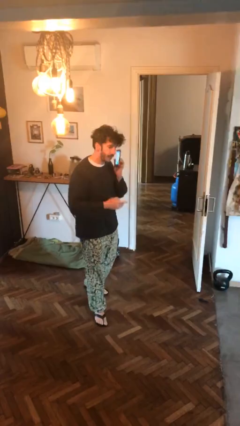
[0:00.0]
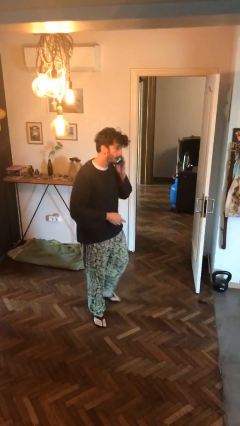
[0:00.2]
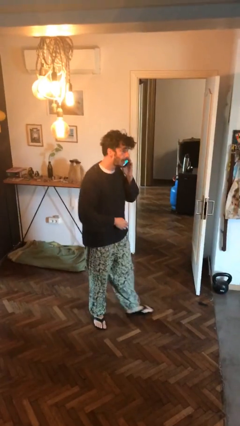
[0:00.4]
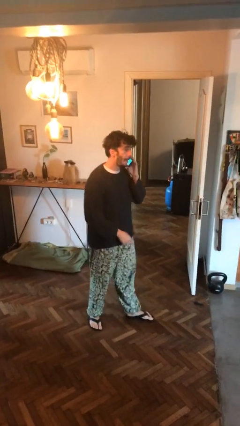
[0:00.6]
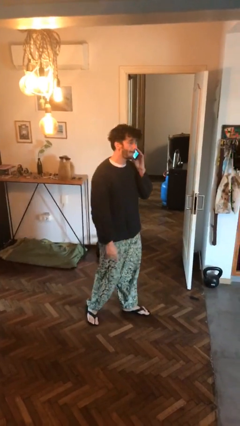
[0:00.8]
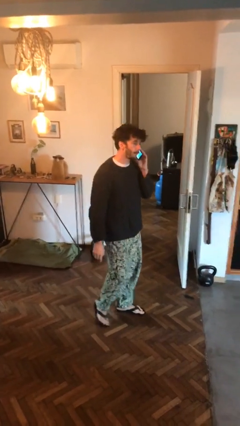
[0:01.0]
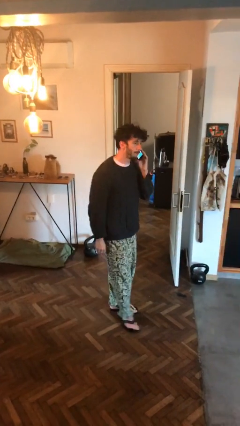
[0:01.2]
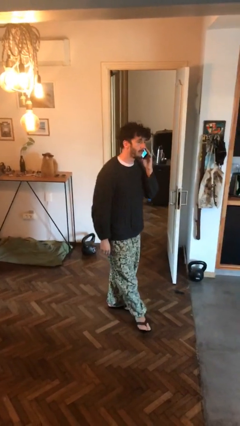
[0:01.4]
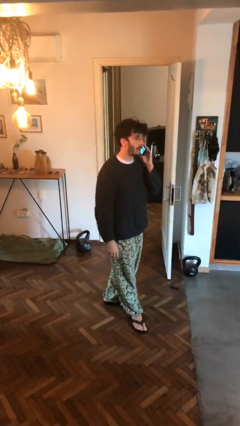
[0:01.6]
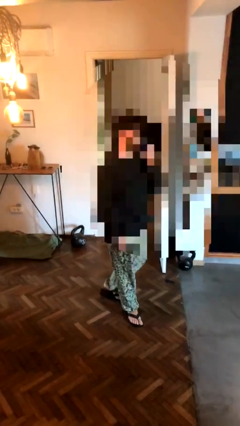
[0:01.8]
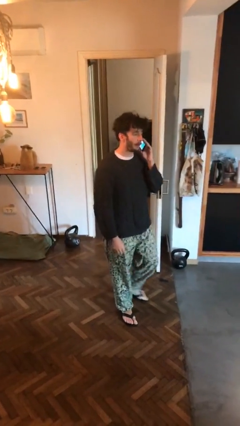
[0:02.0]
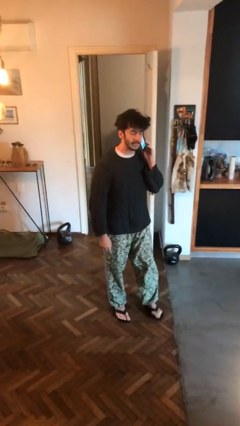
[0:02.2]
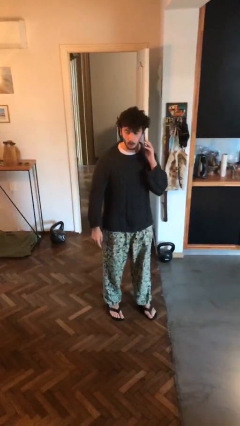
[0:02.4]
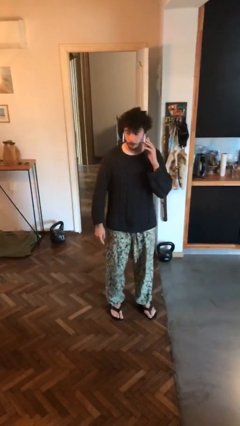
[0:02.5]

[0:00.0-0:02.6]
person talks on phone

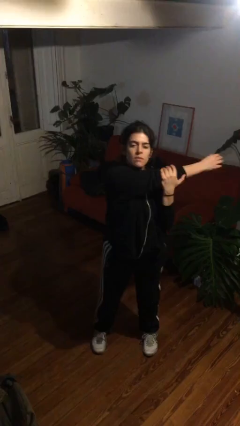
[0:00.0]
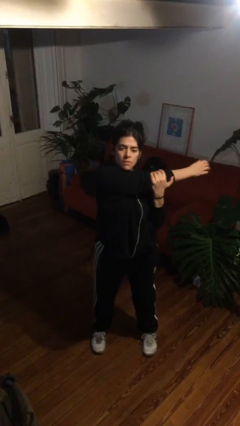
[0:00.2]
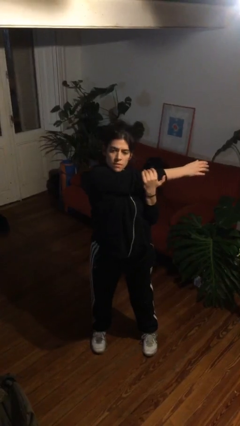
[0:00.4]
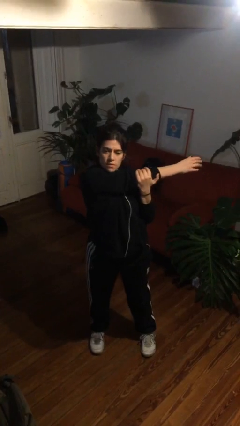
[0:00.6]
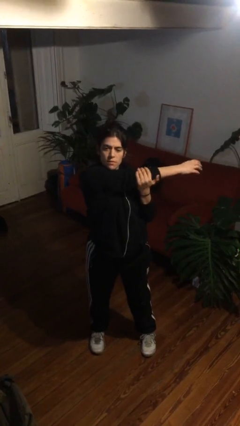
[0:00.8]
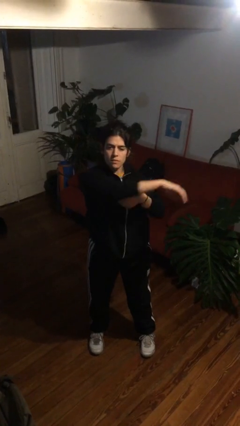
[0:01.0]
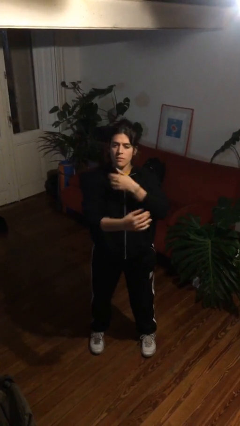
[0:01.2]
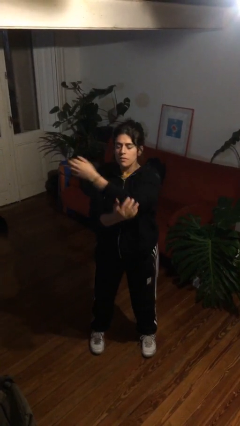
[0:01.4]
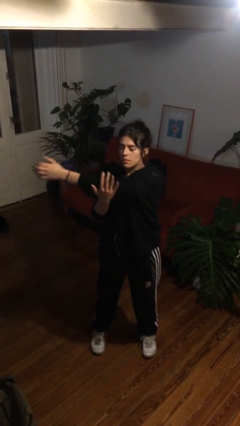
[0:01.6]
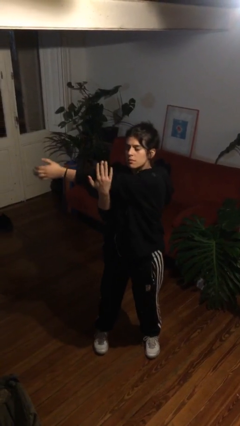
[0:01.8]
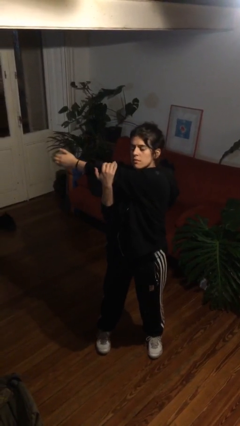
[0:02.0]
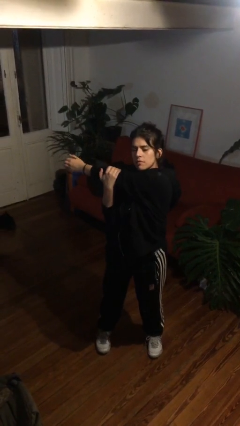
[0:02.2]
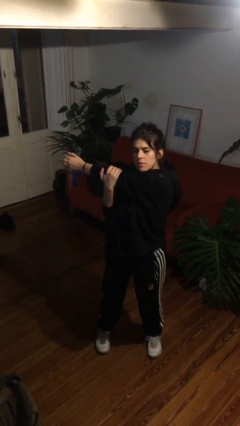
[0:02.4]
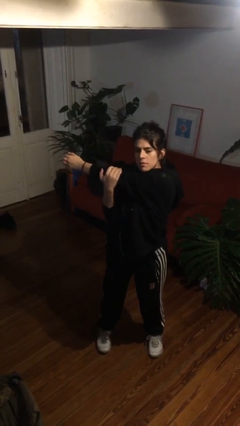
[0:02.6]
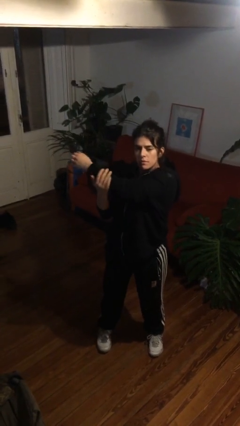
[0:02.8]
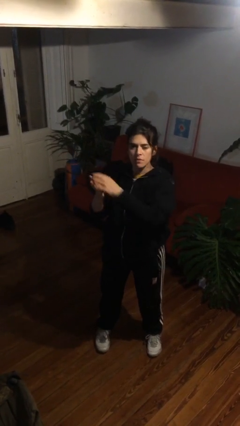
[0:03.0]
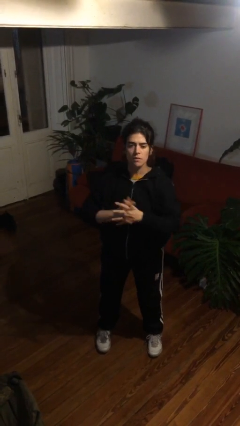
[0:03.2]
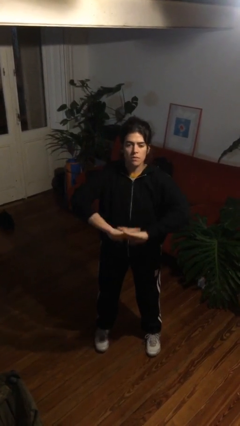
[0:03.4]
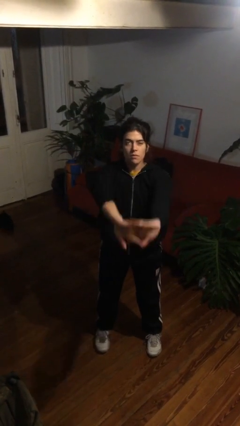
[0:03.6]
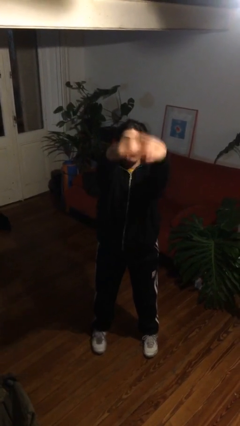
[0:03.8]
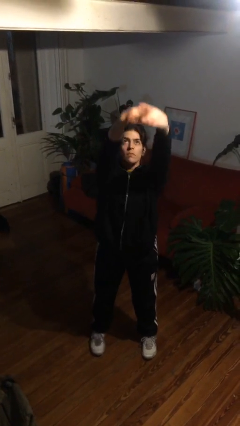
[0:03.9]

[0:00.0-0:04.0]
person stretches arms to side

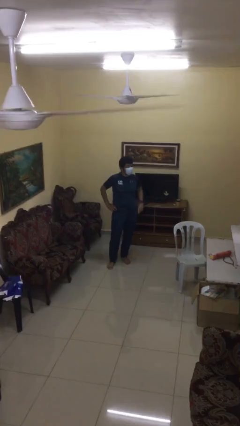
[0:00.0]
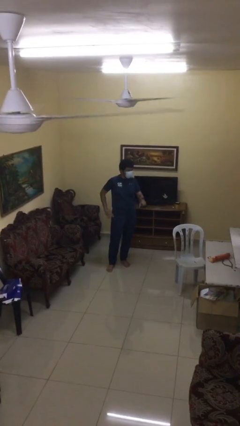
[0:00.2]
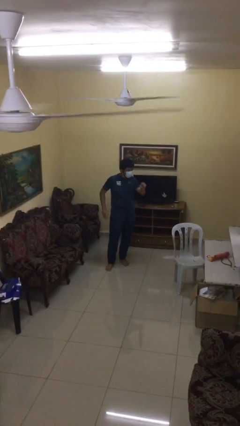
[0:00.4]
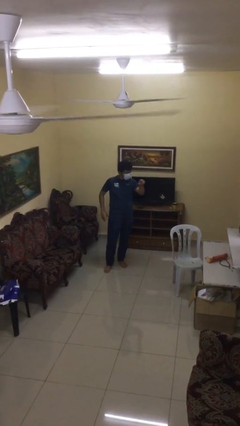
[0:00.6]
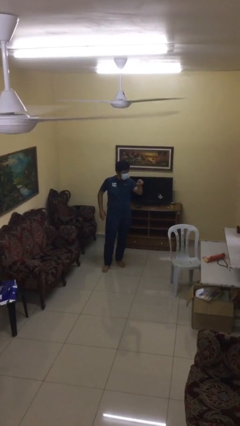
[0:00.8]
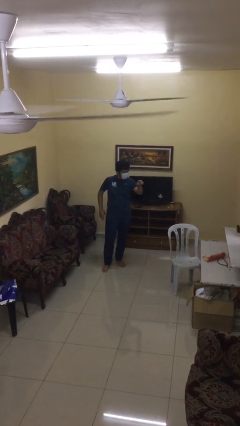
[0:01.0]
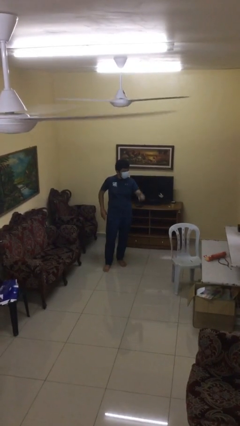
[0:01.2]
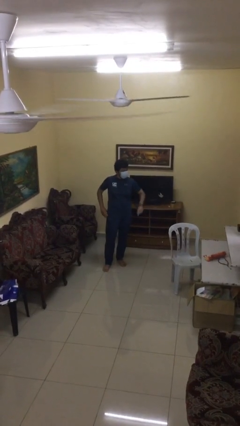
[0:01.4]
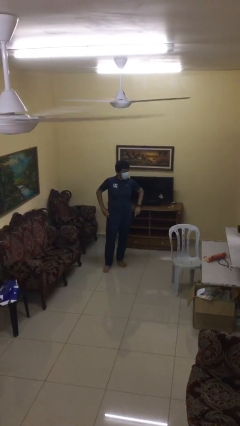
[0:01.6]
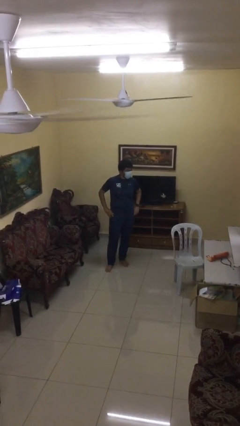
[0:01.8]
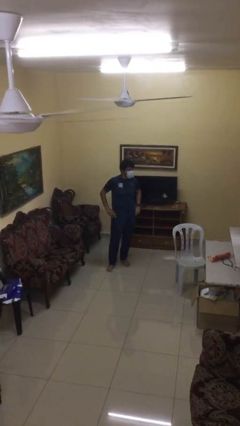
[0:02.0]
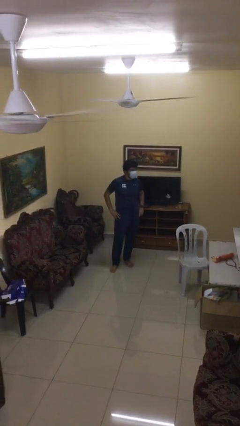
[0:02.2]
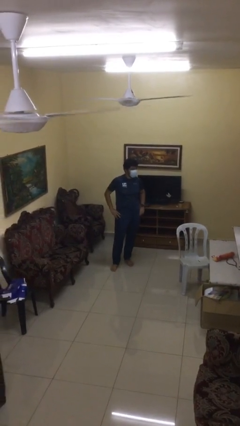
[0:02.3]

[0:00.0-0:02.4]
person points at person

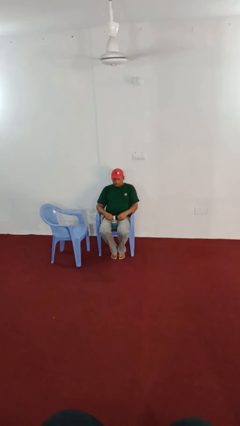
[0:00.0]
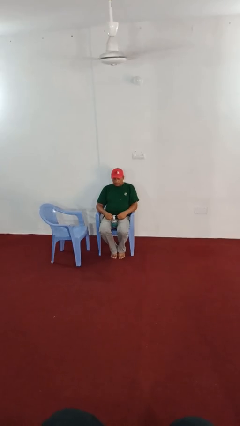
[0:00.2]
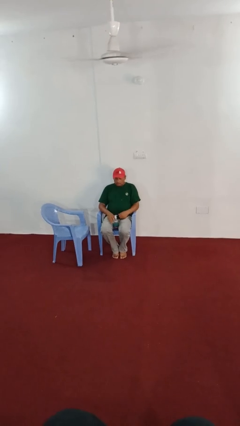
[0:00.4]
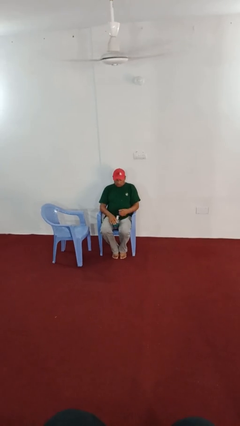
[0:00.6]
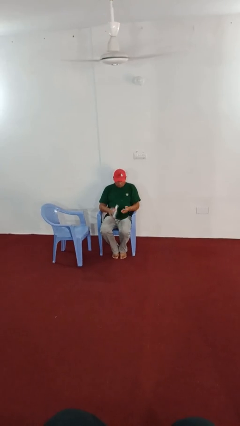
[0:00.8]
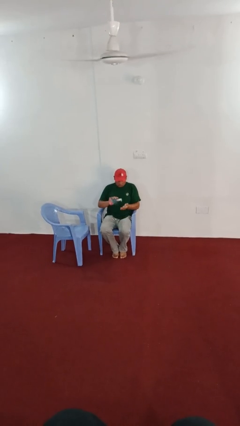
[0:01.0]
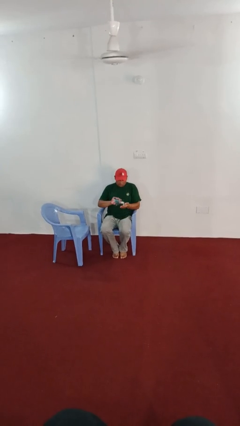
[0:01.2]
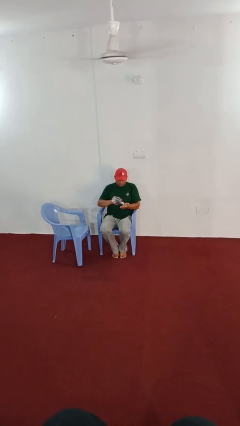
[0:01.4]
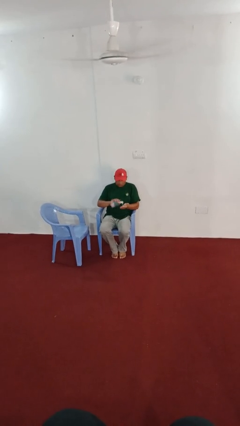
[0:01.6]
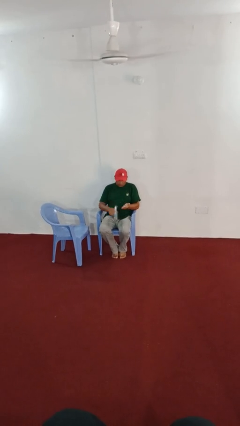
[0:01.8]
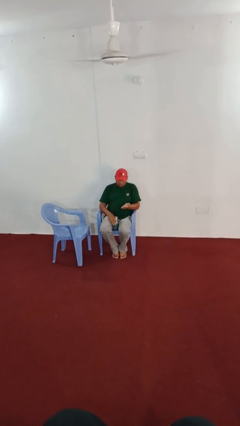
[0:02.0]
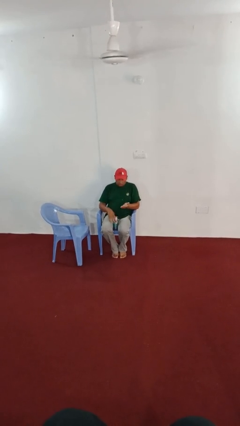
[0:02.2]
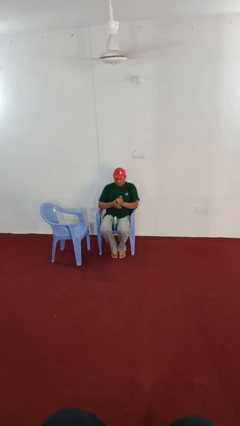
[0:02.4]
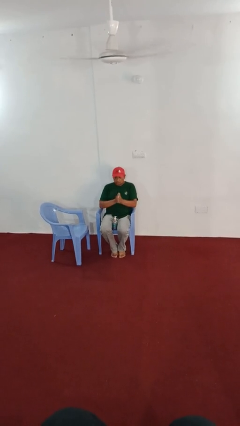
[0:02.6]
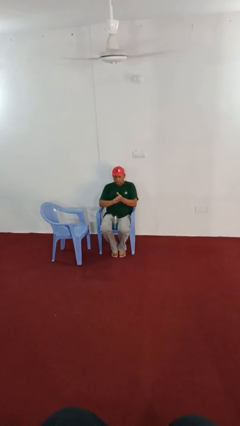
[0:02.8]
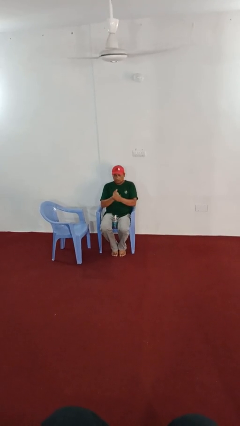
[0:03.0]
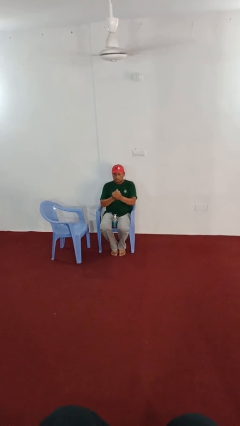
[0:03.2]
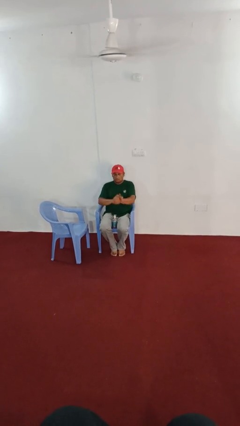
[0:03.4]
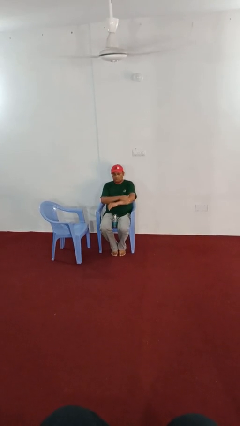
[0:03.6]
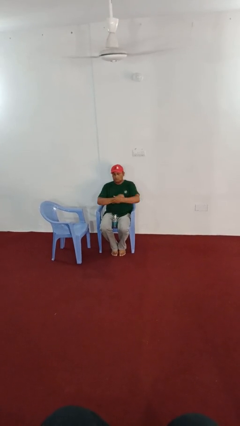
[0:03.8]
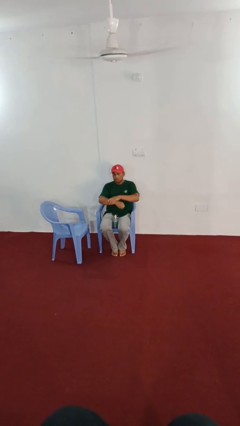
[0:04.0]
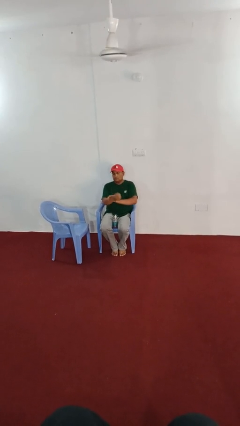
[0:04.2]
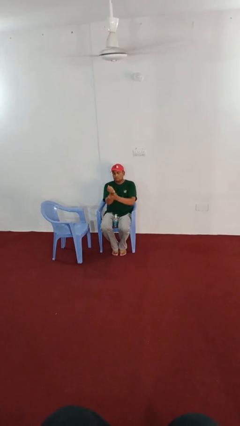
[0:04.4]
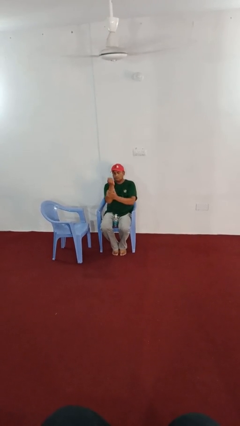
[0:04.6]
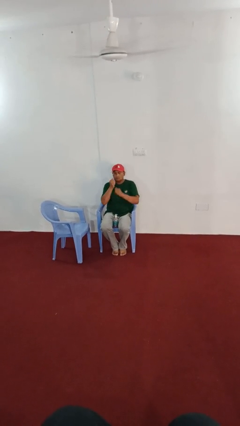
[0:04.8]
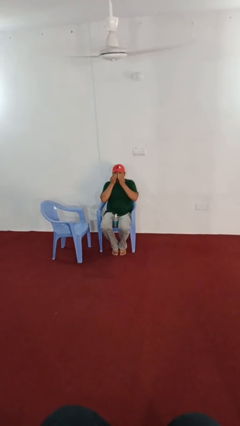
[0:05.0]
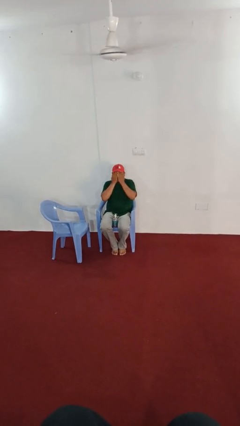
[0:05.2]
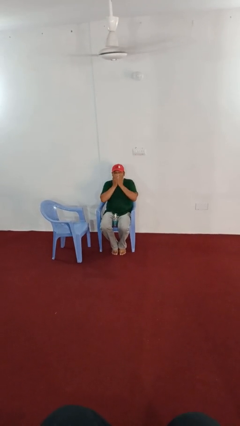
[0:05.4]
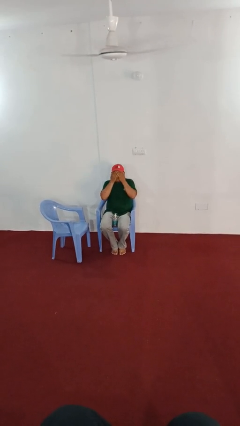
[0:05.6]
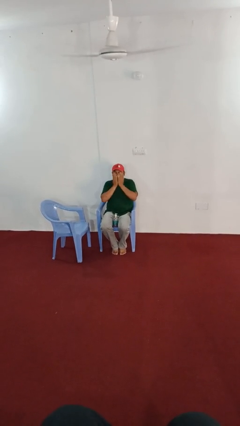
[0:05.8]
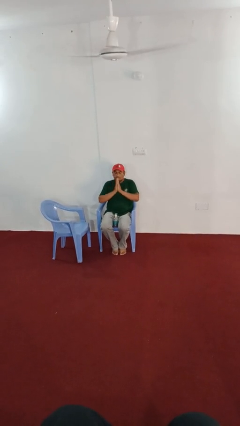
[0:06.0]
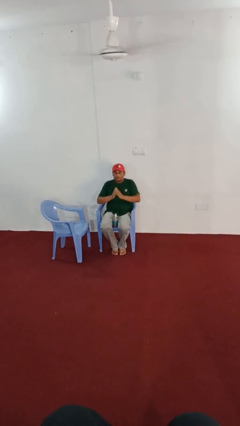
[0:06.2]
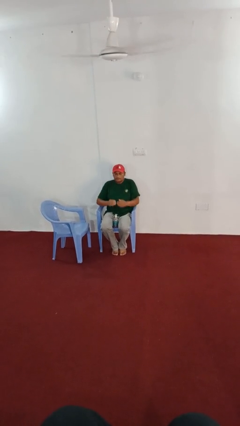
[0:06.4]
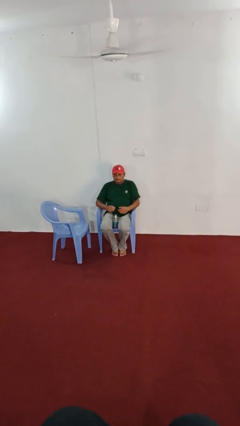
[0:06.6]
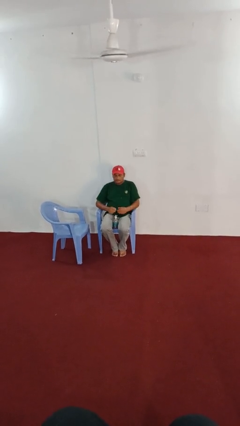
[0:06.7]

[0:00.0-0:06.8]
person applies sunscreen

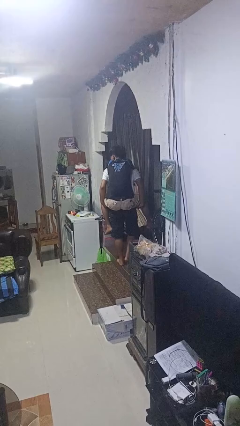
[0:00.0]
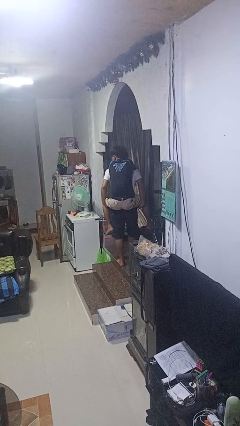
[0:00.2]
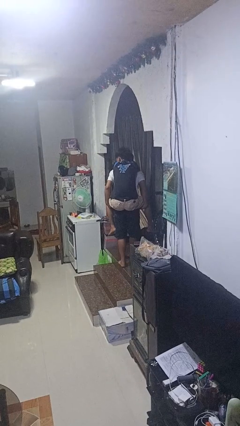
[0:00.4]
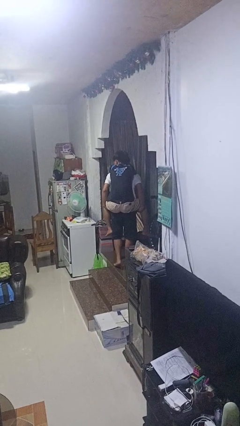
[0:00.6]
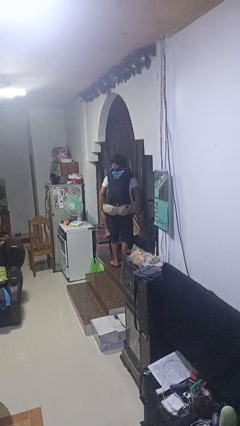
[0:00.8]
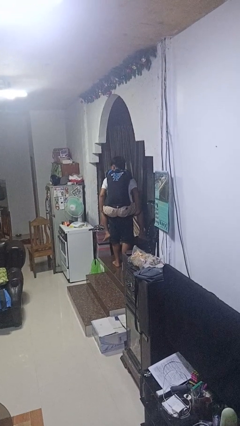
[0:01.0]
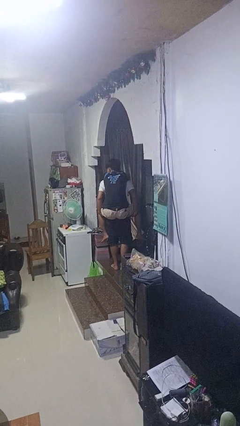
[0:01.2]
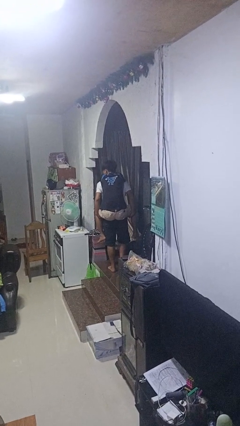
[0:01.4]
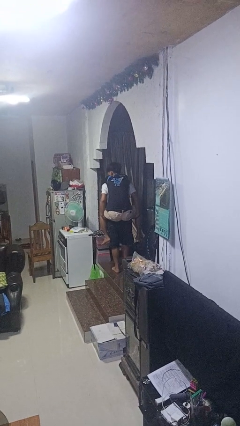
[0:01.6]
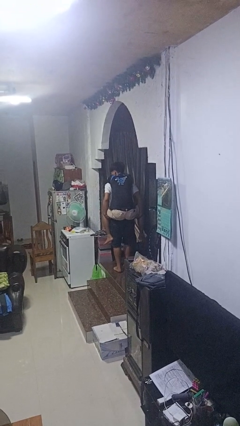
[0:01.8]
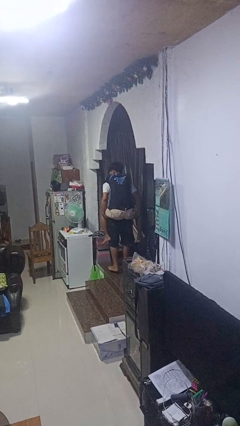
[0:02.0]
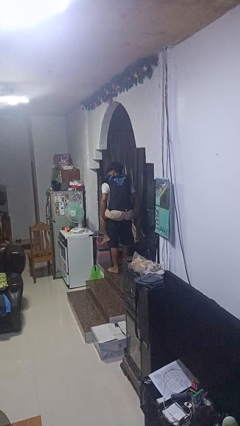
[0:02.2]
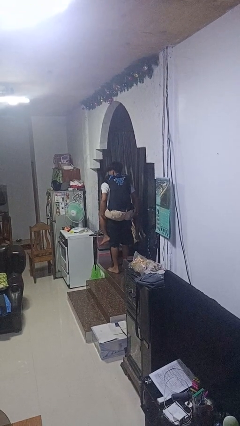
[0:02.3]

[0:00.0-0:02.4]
person carries person on back
